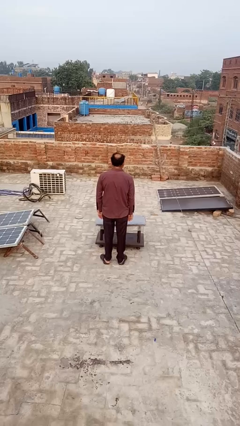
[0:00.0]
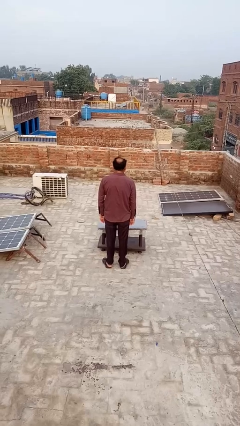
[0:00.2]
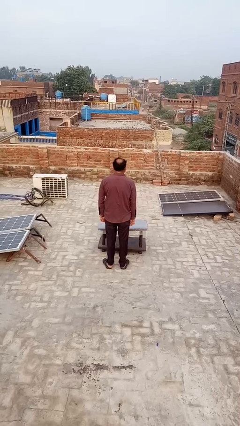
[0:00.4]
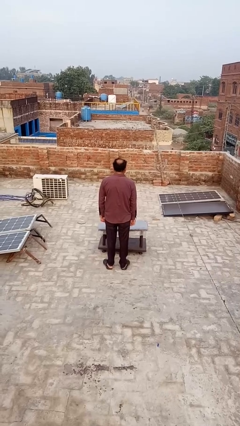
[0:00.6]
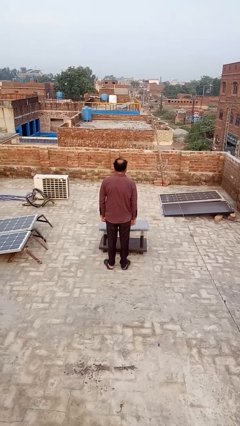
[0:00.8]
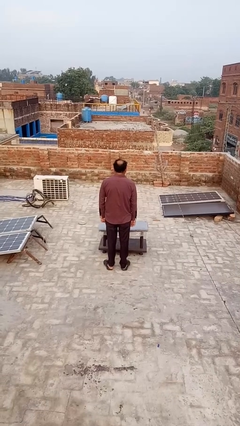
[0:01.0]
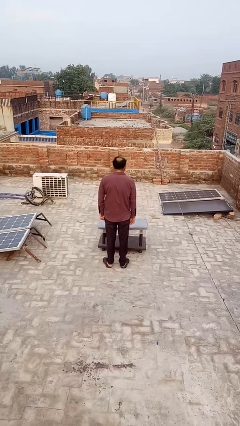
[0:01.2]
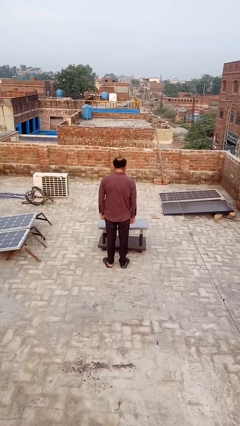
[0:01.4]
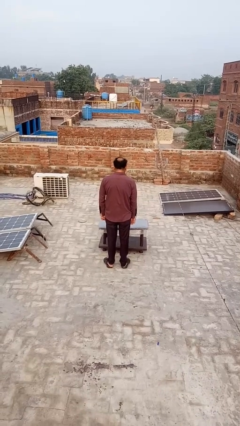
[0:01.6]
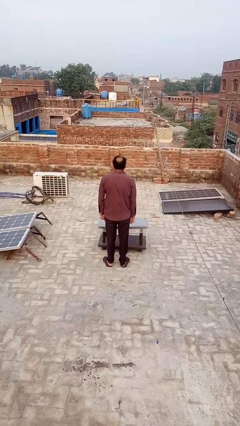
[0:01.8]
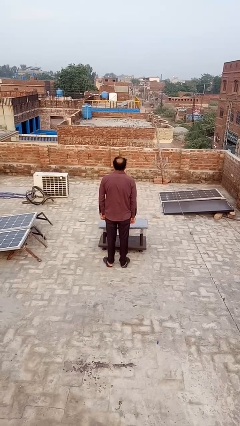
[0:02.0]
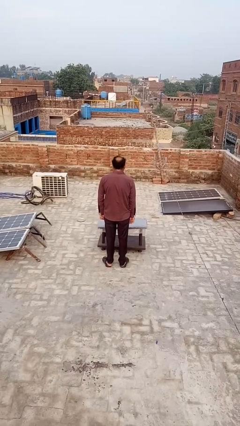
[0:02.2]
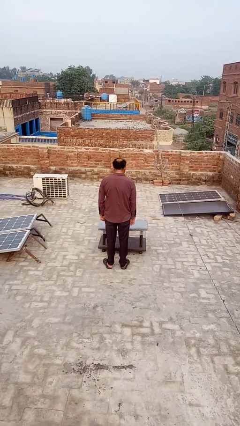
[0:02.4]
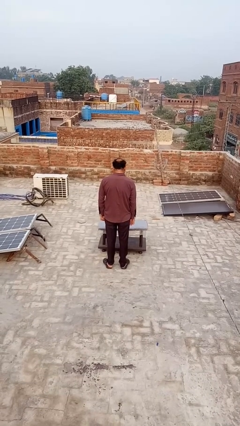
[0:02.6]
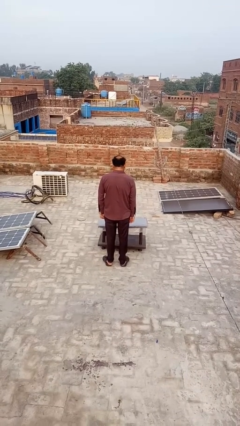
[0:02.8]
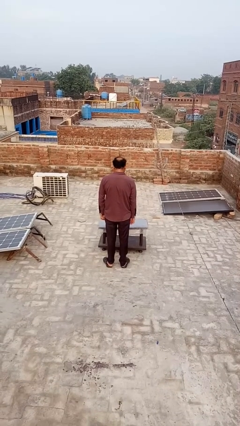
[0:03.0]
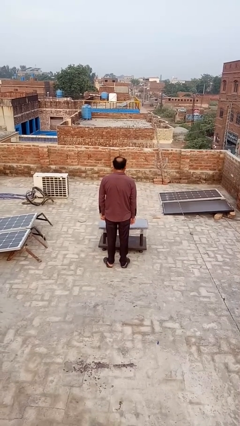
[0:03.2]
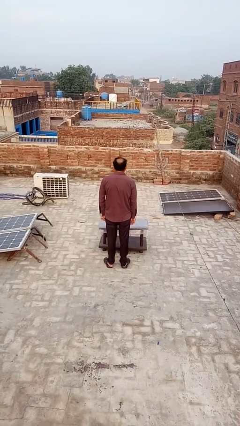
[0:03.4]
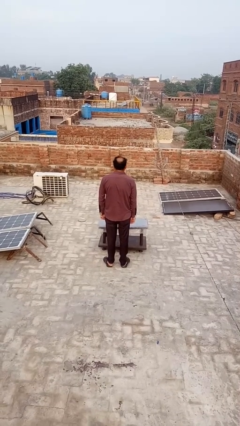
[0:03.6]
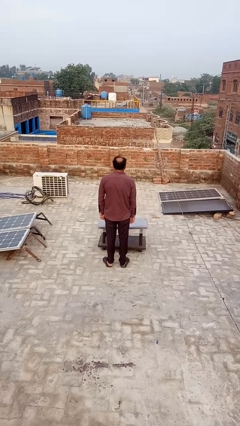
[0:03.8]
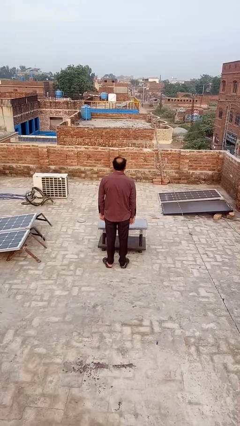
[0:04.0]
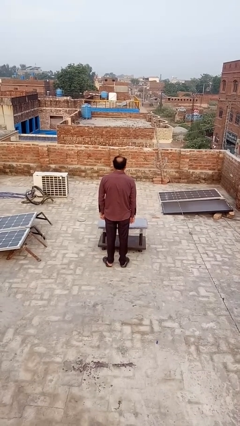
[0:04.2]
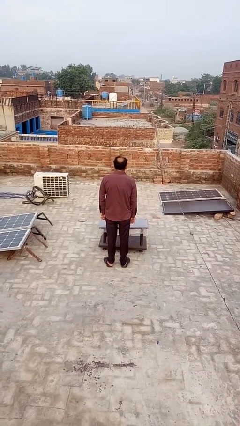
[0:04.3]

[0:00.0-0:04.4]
person nods head

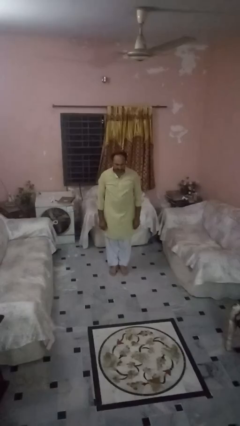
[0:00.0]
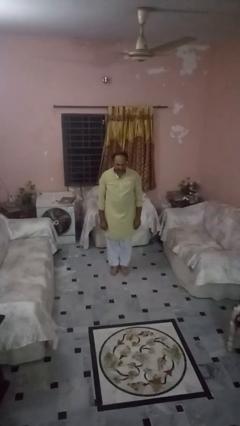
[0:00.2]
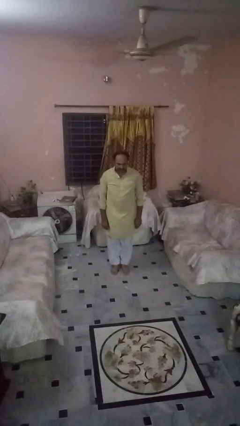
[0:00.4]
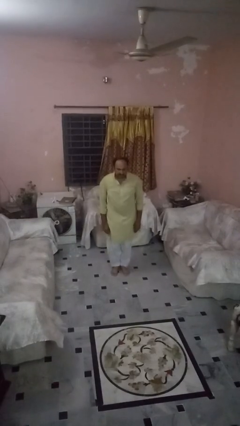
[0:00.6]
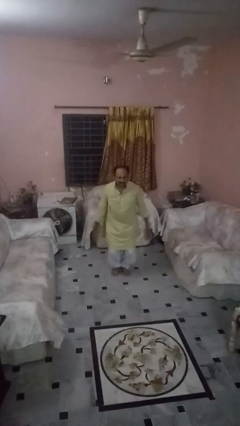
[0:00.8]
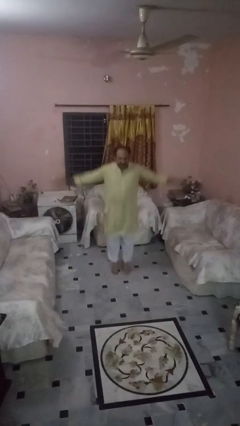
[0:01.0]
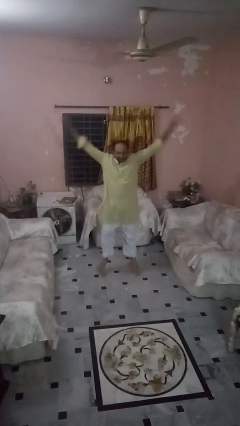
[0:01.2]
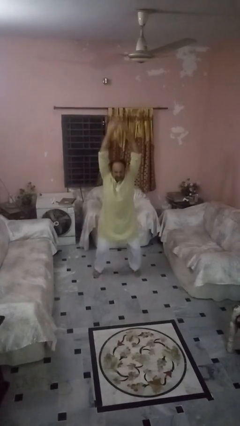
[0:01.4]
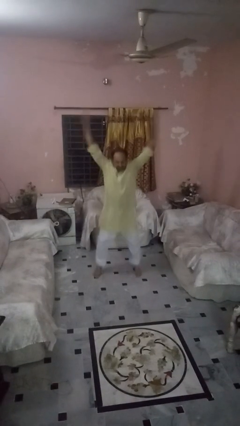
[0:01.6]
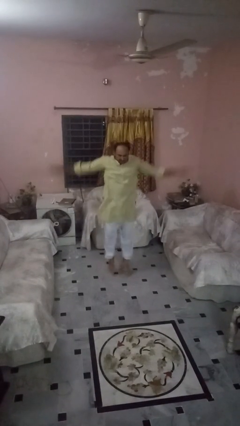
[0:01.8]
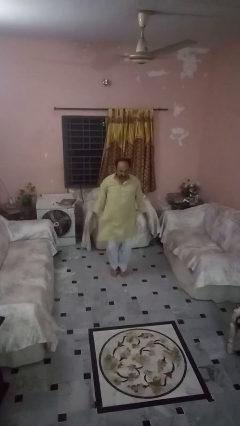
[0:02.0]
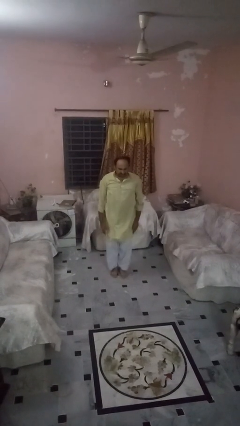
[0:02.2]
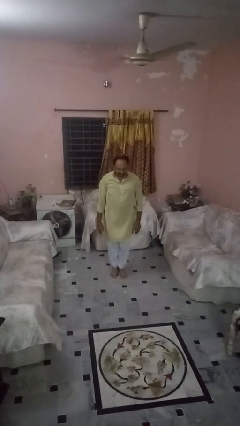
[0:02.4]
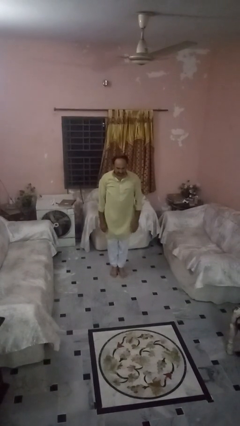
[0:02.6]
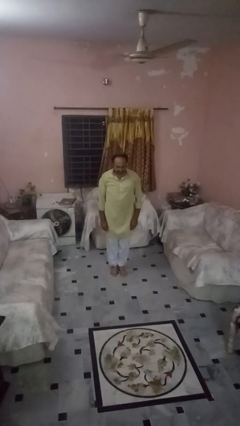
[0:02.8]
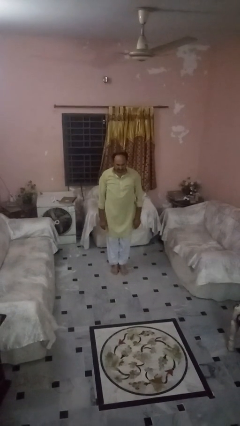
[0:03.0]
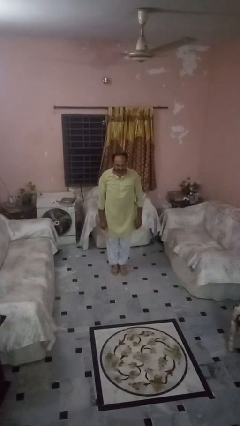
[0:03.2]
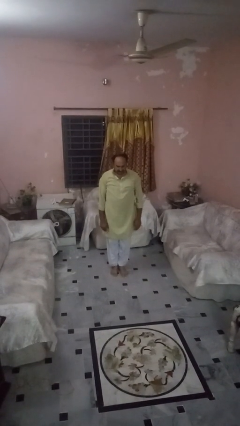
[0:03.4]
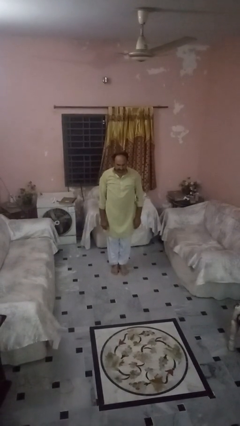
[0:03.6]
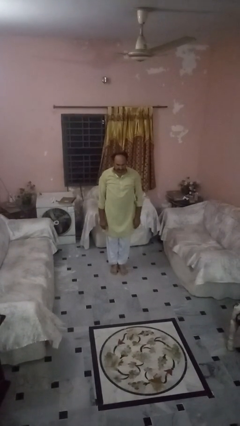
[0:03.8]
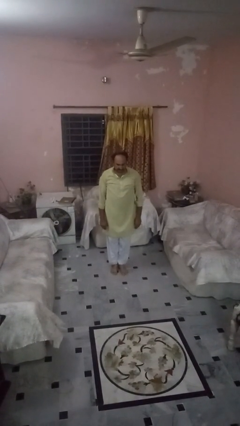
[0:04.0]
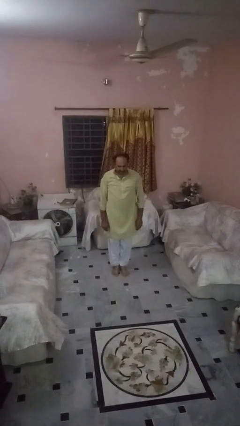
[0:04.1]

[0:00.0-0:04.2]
person exercises with jumping jacks

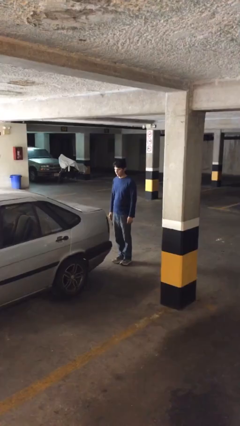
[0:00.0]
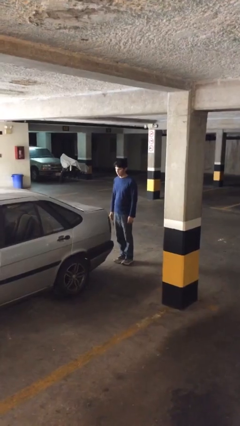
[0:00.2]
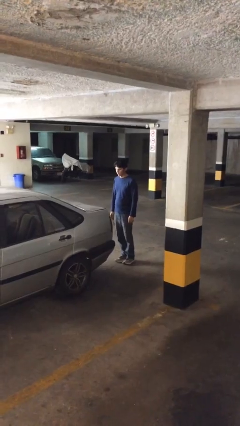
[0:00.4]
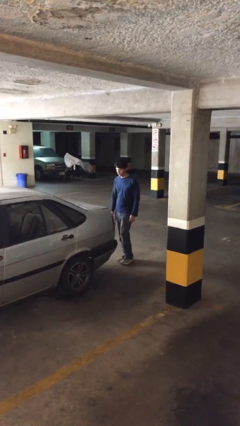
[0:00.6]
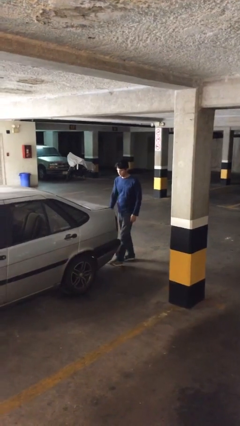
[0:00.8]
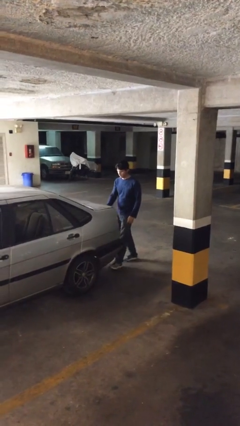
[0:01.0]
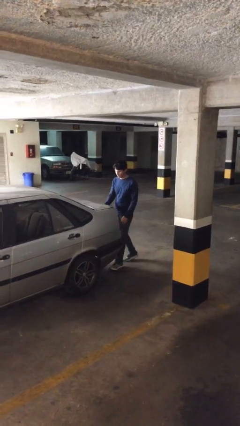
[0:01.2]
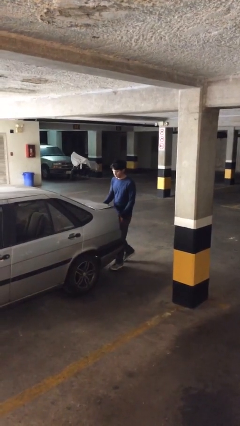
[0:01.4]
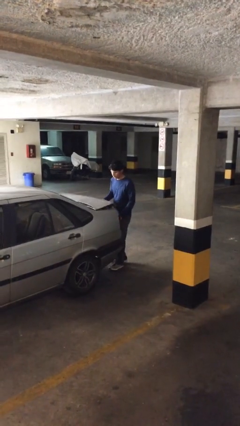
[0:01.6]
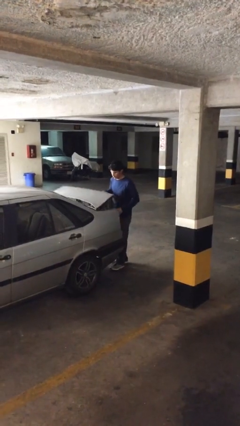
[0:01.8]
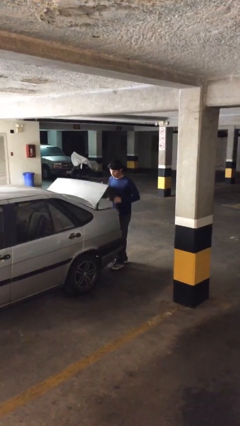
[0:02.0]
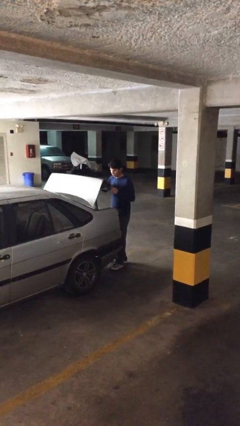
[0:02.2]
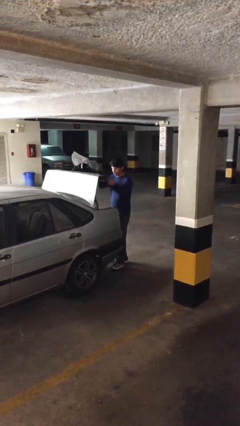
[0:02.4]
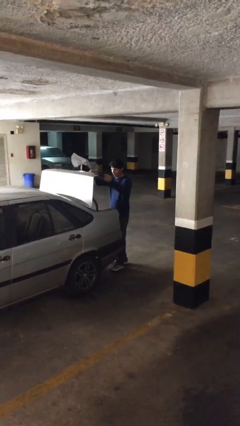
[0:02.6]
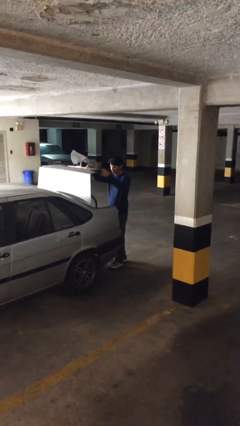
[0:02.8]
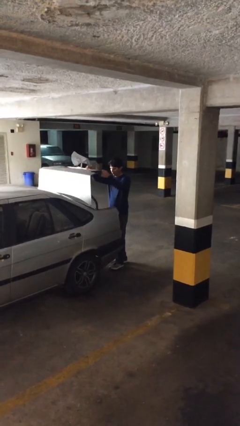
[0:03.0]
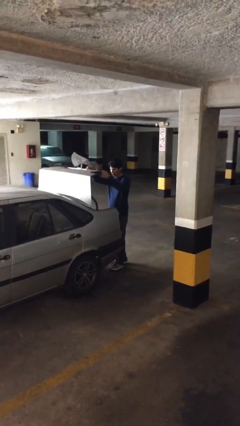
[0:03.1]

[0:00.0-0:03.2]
person opens car trunk

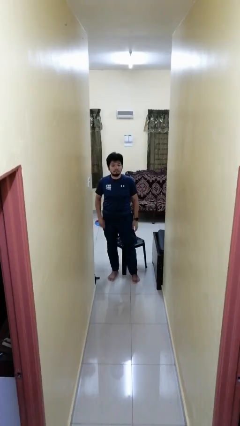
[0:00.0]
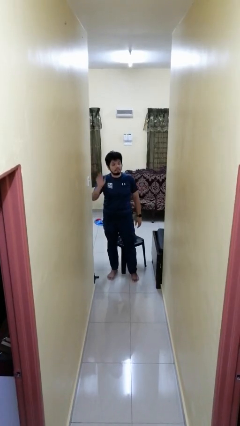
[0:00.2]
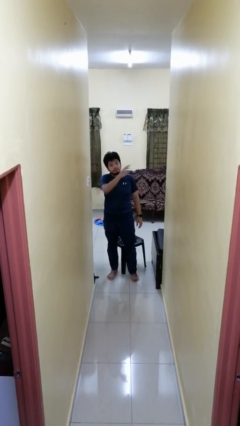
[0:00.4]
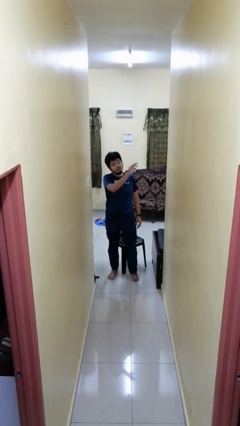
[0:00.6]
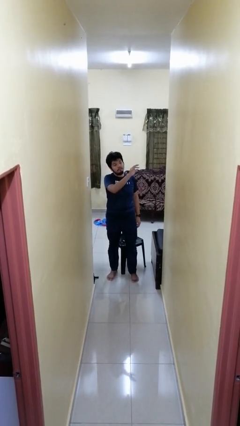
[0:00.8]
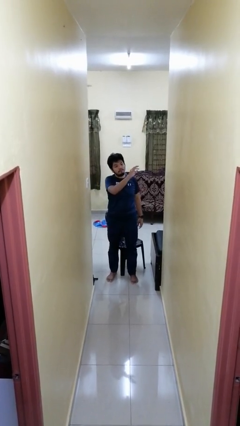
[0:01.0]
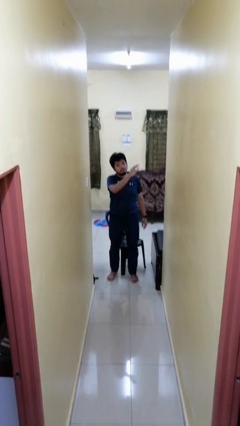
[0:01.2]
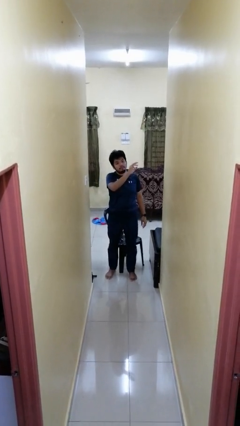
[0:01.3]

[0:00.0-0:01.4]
person gestures swipe left

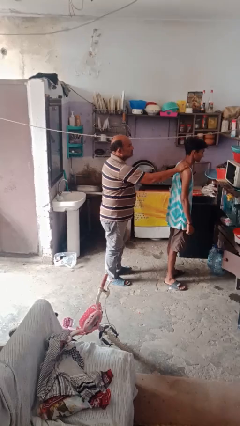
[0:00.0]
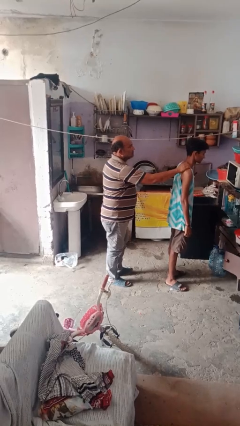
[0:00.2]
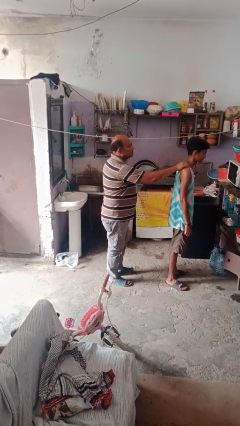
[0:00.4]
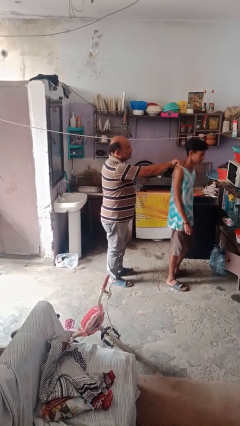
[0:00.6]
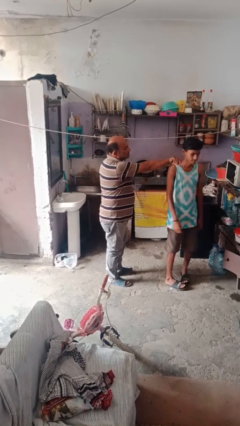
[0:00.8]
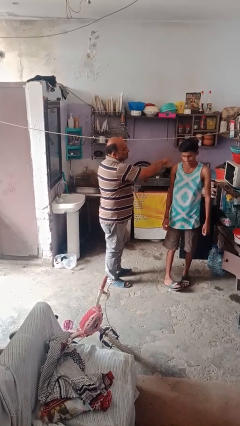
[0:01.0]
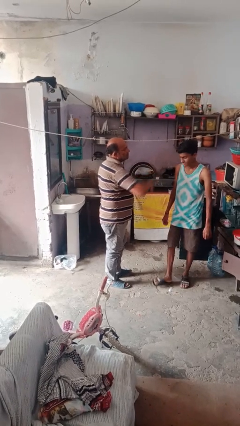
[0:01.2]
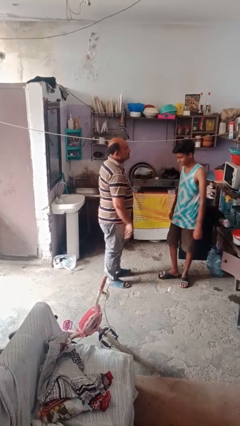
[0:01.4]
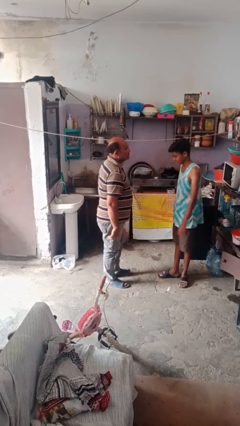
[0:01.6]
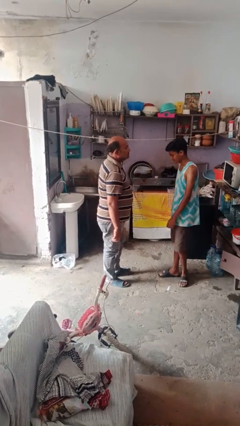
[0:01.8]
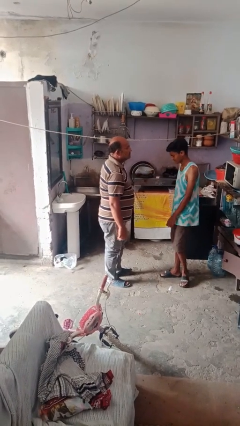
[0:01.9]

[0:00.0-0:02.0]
person spins person around

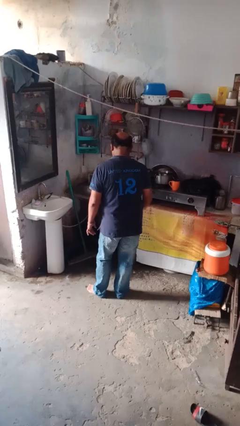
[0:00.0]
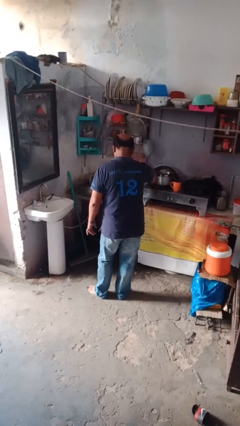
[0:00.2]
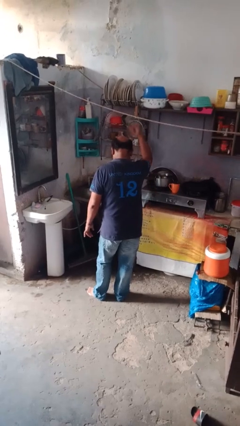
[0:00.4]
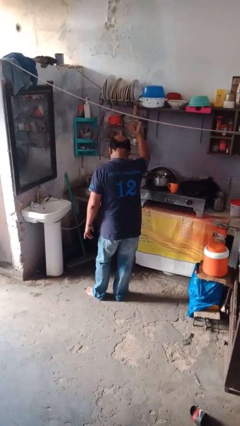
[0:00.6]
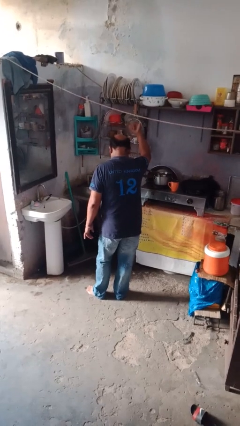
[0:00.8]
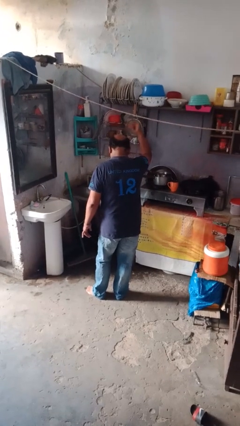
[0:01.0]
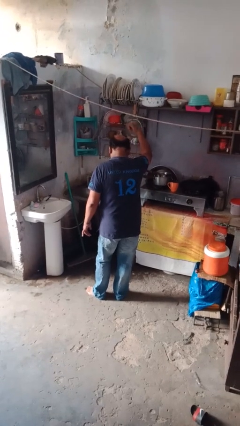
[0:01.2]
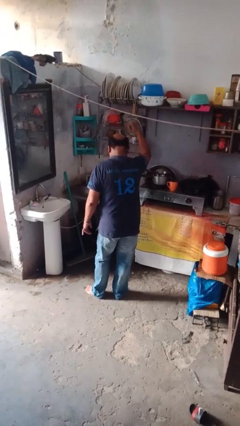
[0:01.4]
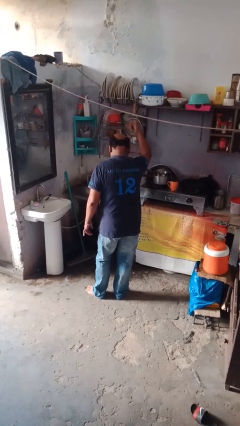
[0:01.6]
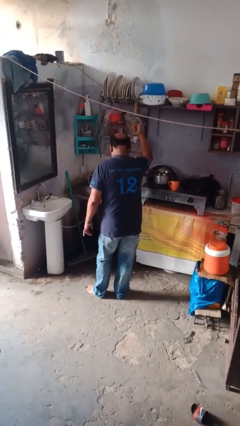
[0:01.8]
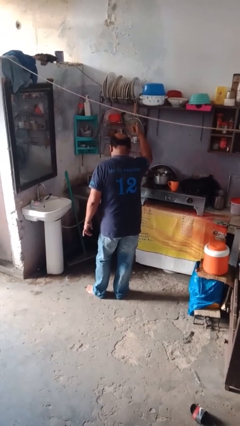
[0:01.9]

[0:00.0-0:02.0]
person gestures hang loose
